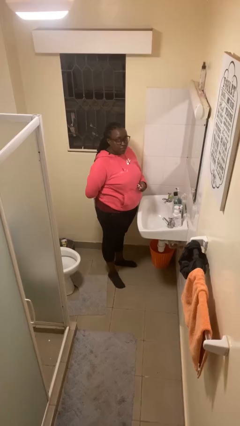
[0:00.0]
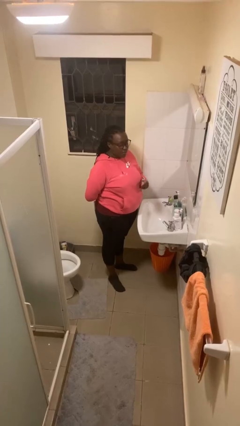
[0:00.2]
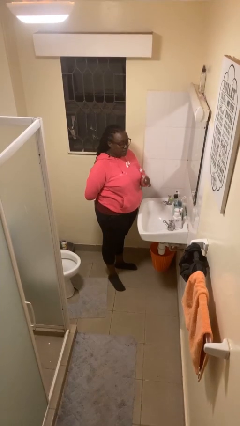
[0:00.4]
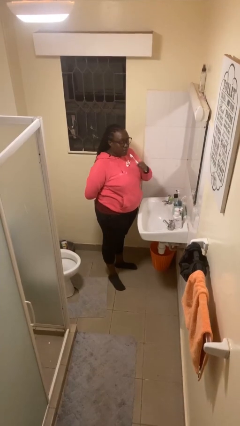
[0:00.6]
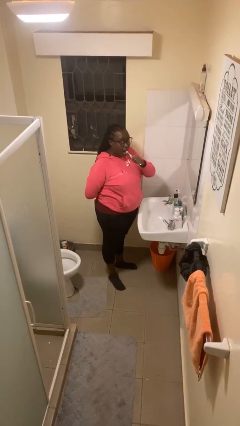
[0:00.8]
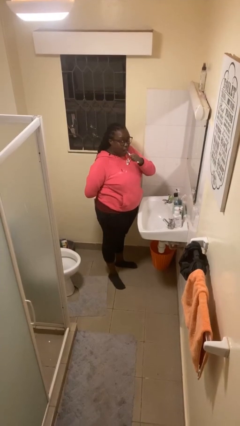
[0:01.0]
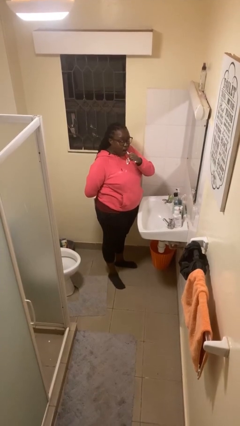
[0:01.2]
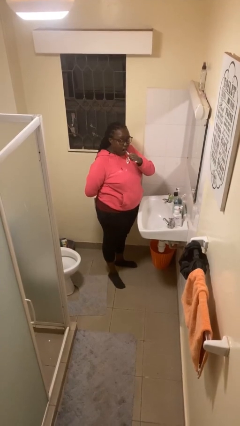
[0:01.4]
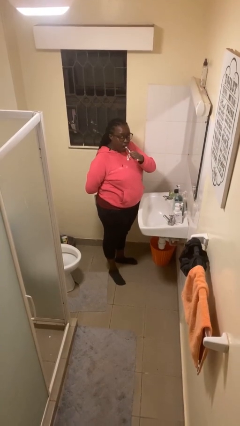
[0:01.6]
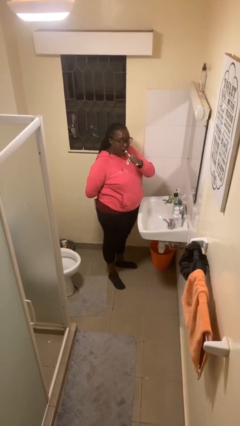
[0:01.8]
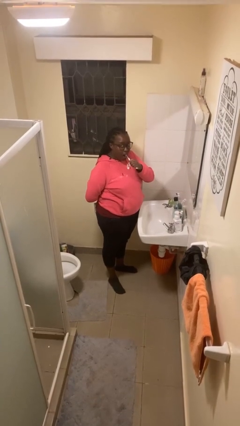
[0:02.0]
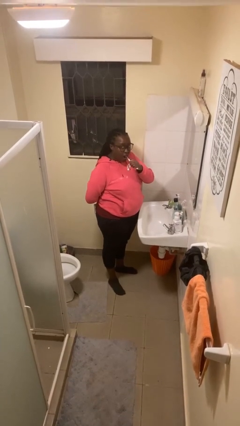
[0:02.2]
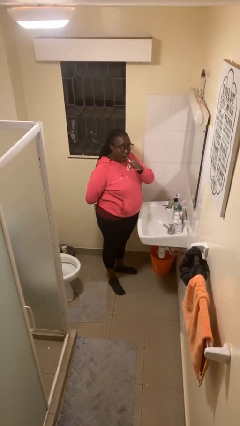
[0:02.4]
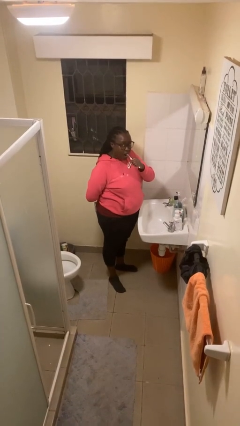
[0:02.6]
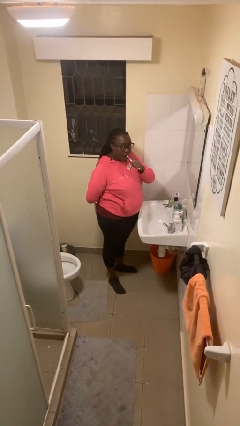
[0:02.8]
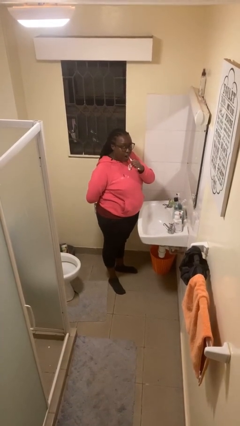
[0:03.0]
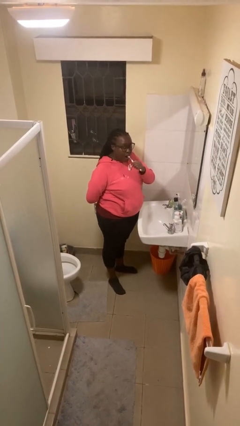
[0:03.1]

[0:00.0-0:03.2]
person brushes teeth

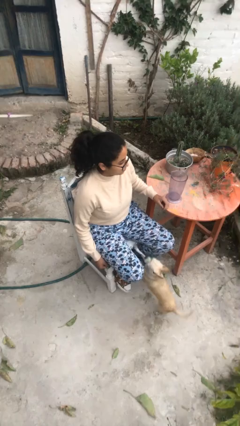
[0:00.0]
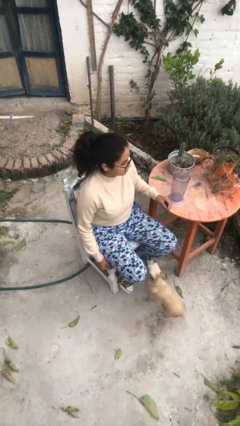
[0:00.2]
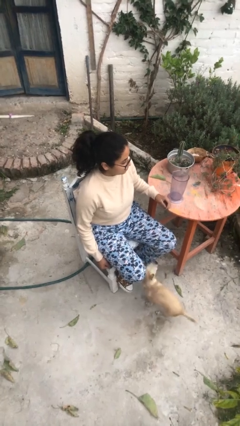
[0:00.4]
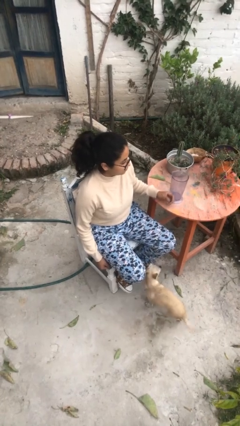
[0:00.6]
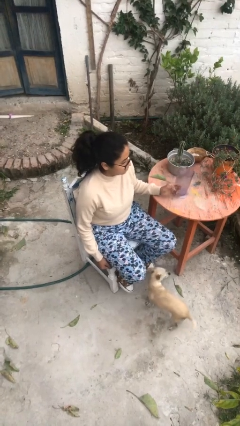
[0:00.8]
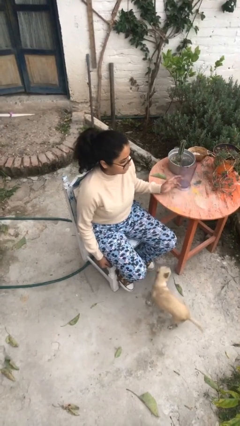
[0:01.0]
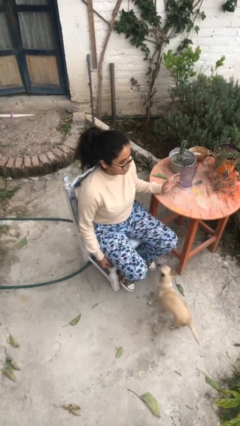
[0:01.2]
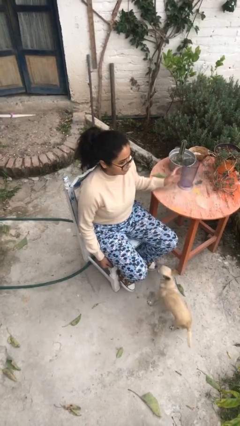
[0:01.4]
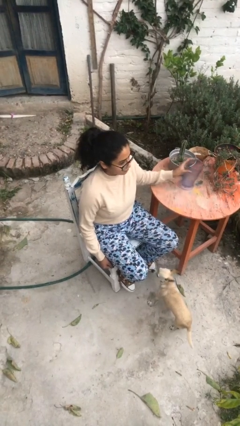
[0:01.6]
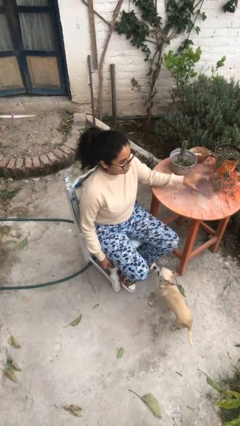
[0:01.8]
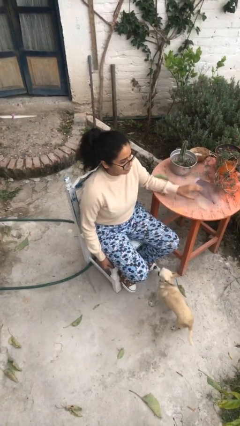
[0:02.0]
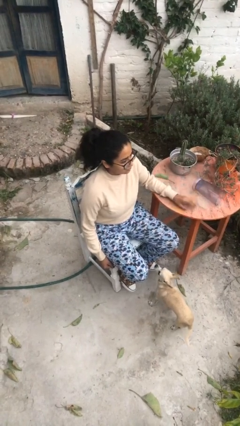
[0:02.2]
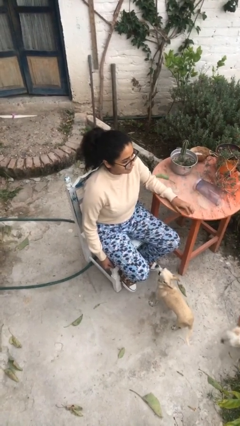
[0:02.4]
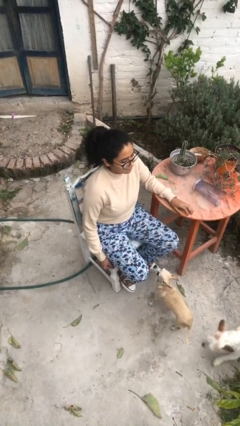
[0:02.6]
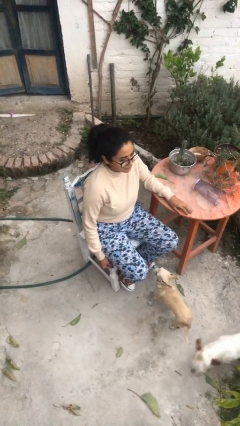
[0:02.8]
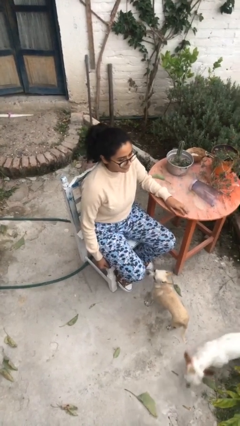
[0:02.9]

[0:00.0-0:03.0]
person knocks over glass

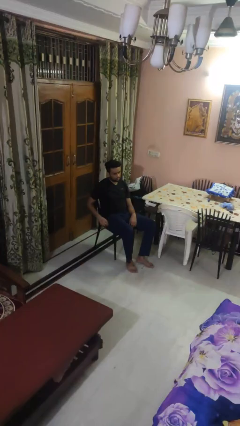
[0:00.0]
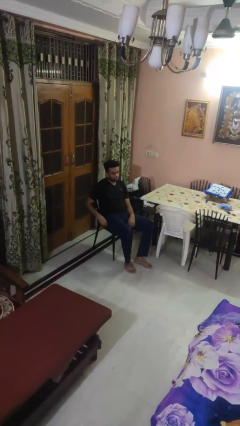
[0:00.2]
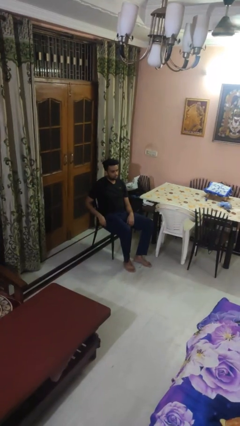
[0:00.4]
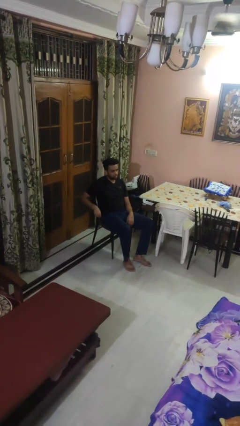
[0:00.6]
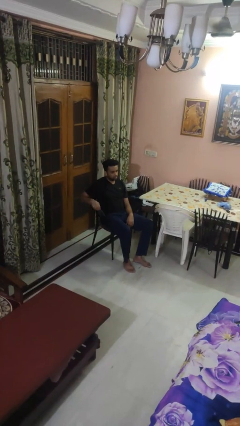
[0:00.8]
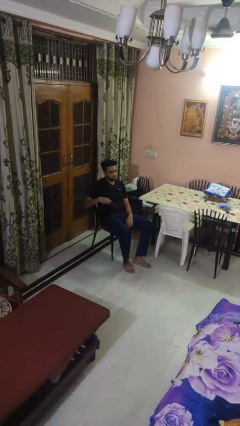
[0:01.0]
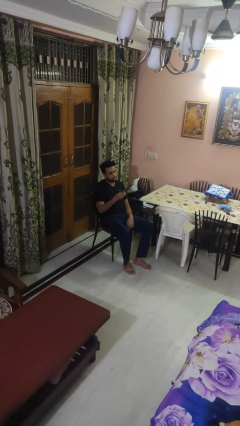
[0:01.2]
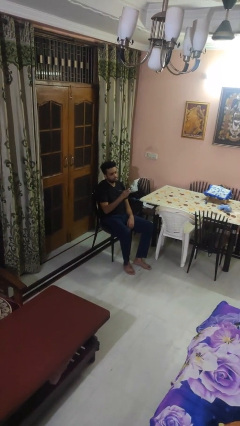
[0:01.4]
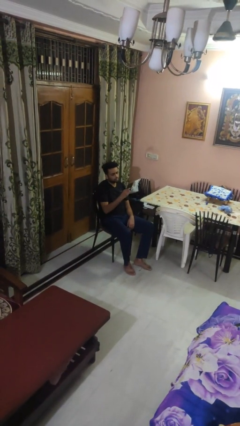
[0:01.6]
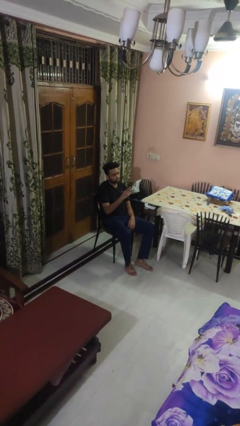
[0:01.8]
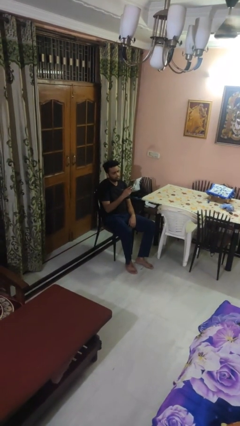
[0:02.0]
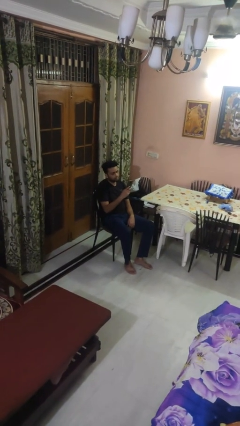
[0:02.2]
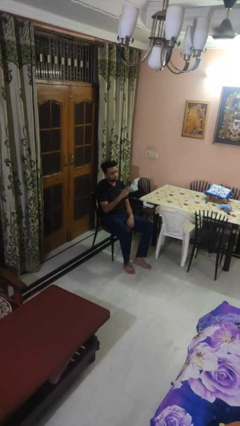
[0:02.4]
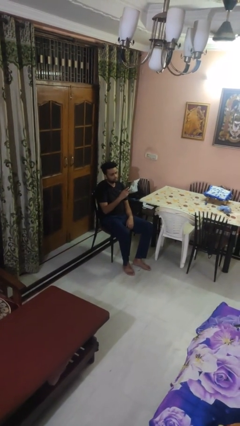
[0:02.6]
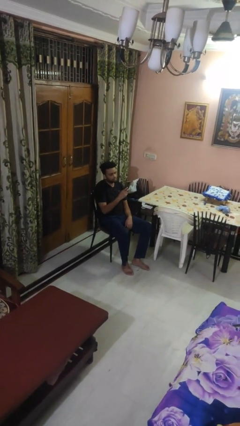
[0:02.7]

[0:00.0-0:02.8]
person takes phone from pocket

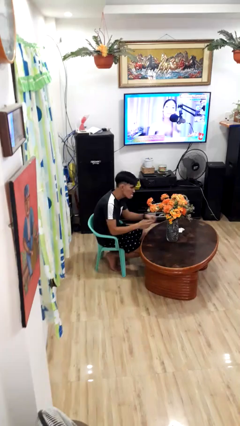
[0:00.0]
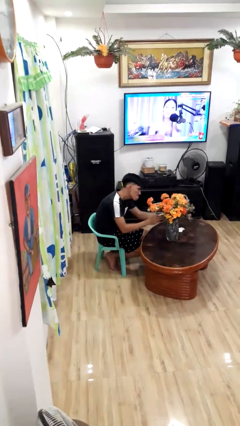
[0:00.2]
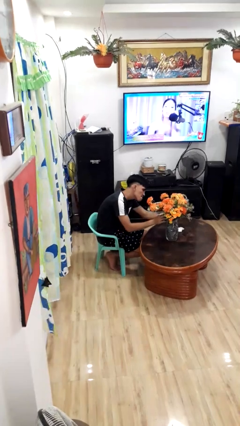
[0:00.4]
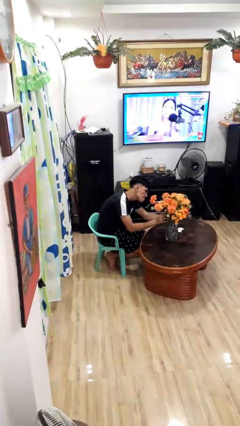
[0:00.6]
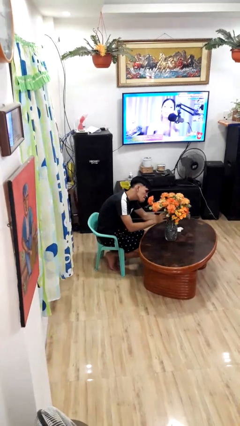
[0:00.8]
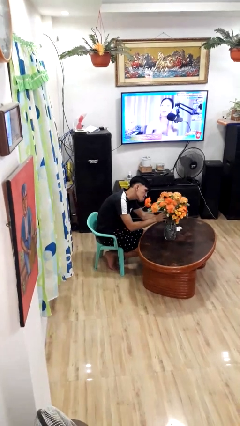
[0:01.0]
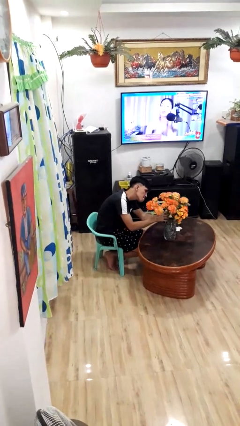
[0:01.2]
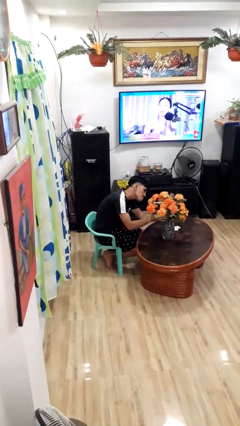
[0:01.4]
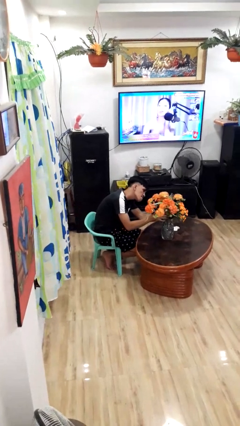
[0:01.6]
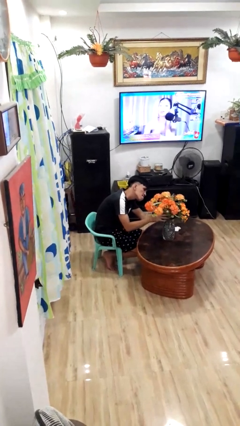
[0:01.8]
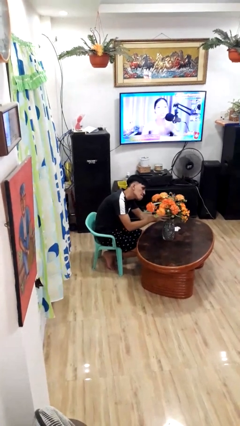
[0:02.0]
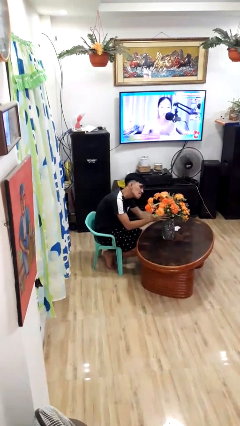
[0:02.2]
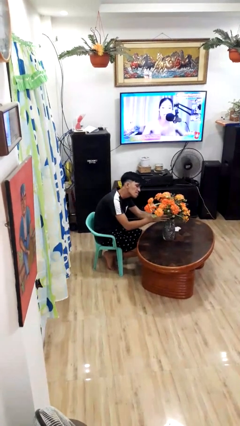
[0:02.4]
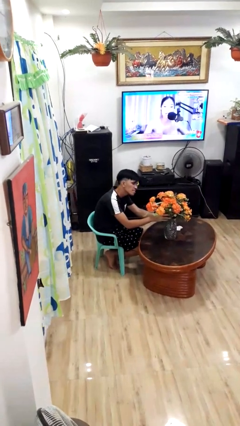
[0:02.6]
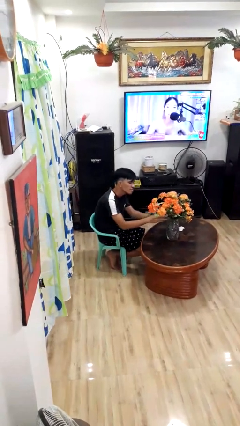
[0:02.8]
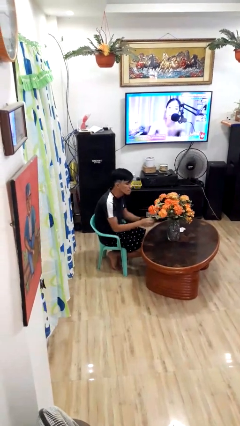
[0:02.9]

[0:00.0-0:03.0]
person arranges flowers in vase

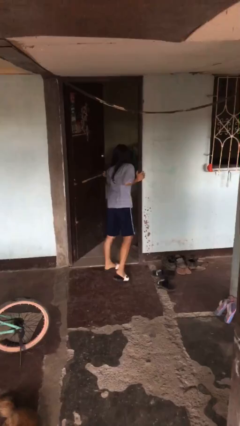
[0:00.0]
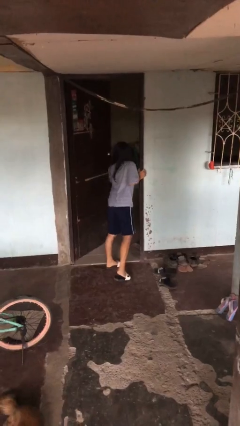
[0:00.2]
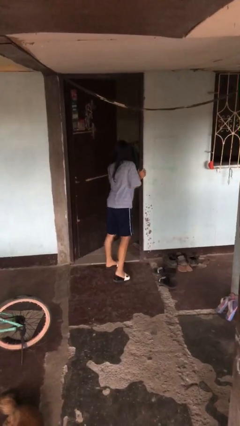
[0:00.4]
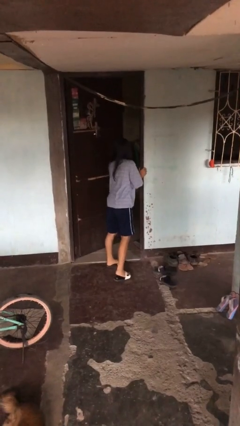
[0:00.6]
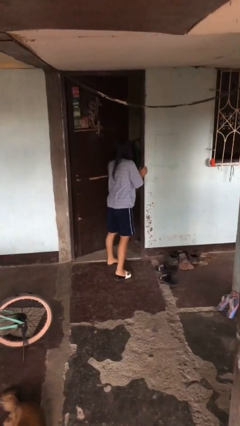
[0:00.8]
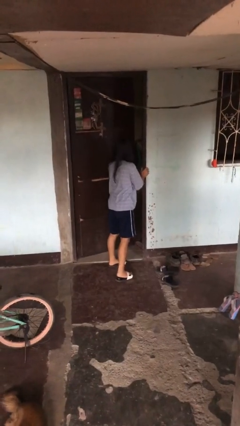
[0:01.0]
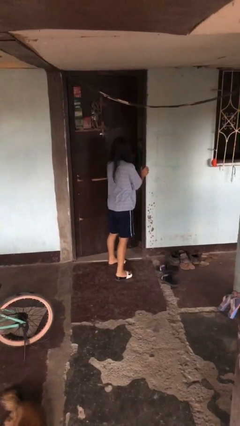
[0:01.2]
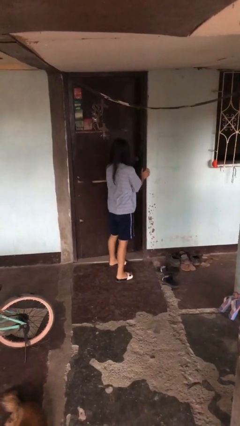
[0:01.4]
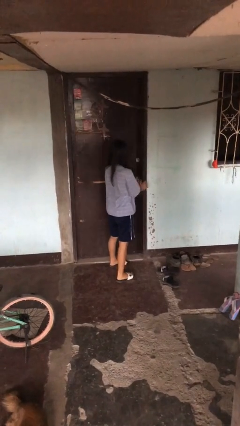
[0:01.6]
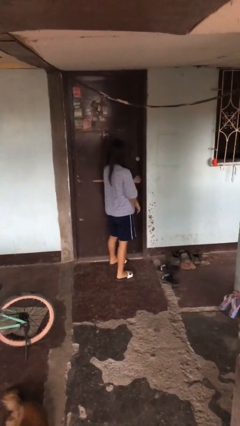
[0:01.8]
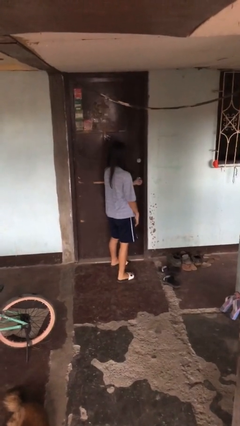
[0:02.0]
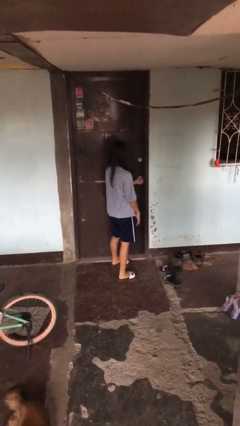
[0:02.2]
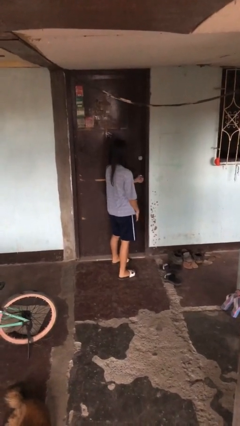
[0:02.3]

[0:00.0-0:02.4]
person closes facility door

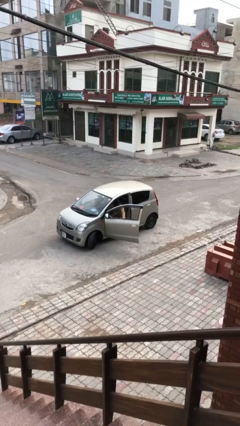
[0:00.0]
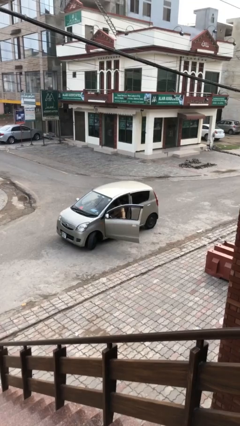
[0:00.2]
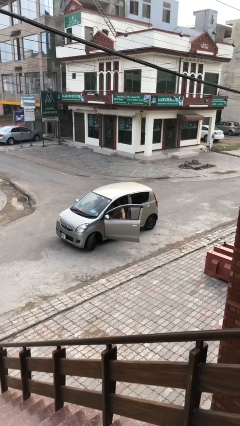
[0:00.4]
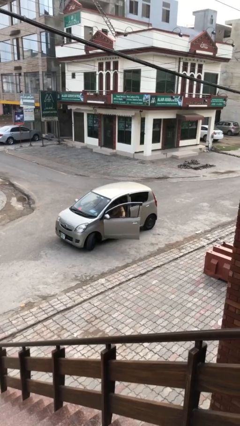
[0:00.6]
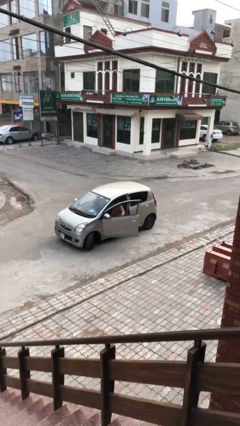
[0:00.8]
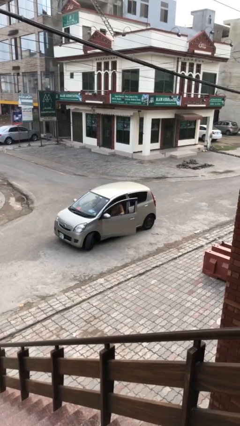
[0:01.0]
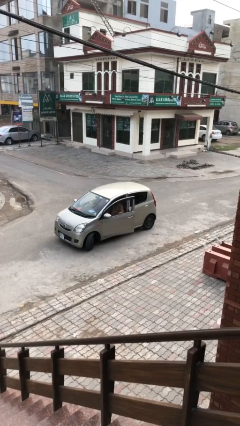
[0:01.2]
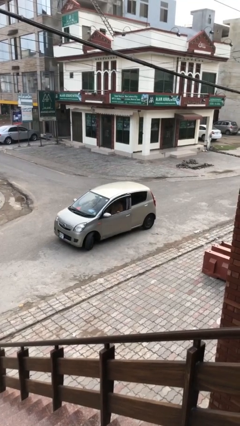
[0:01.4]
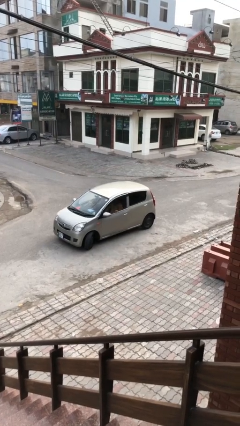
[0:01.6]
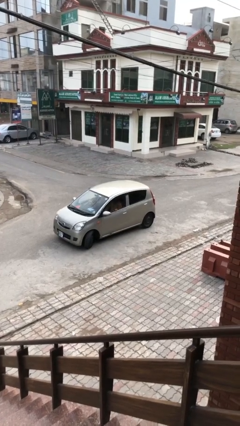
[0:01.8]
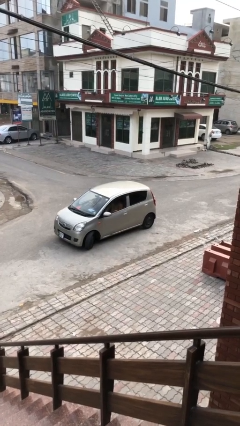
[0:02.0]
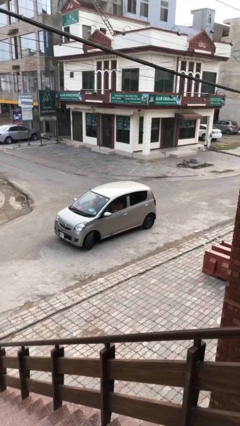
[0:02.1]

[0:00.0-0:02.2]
person closes car door

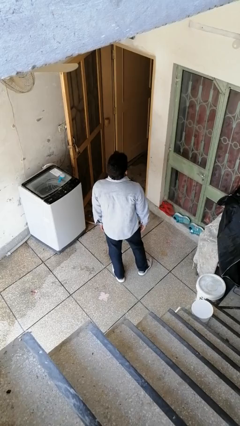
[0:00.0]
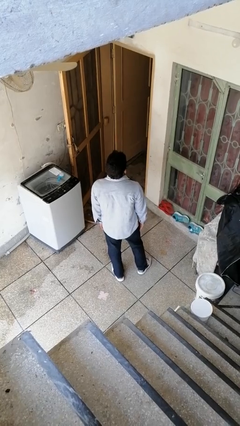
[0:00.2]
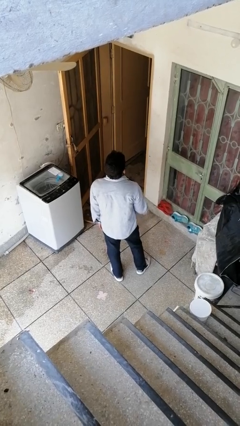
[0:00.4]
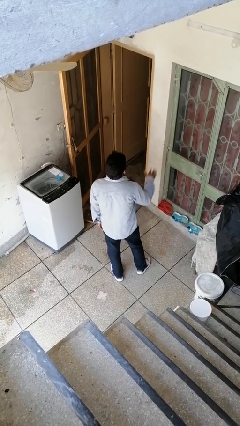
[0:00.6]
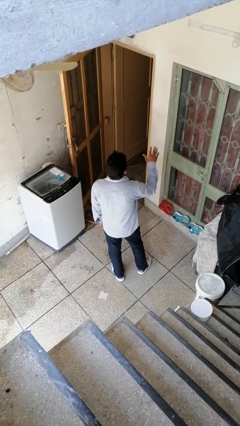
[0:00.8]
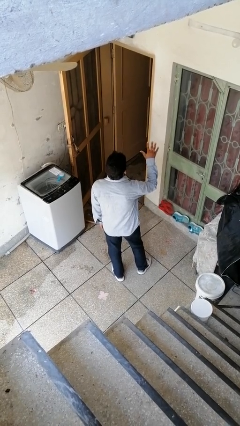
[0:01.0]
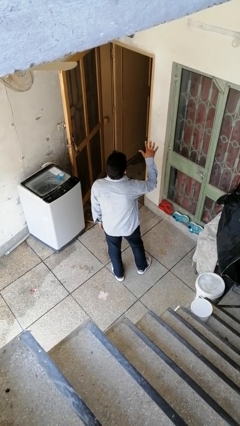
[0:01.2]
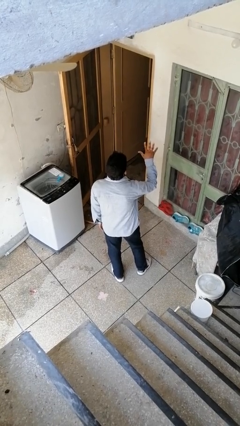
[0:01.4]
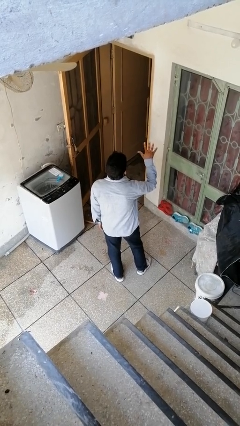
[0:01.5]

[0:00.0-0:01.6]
person gestures number five
